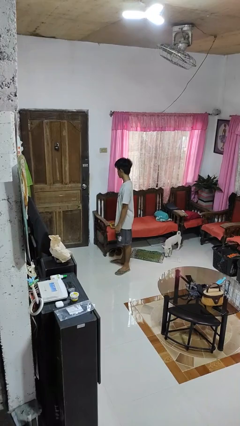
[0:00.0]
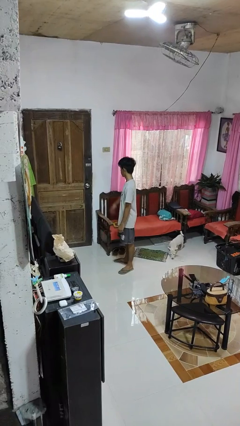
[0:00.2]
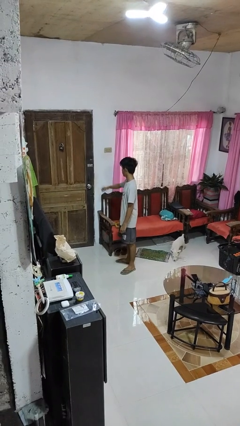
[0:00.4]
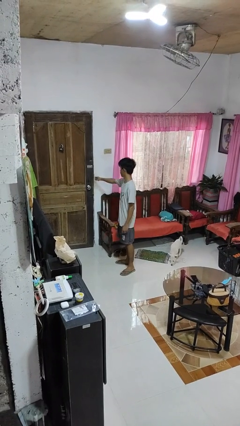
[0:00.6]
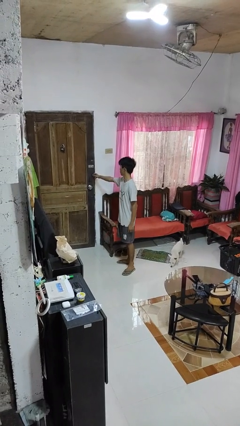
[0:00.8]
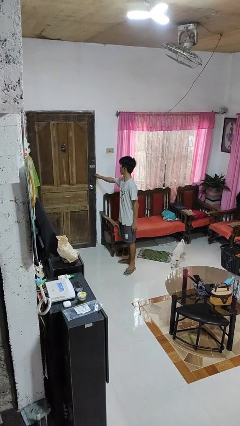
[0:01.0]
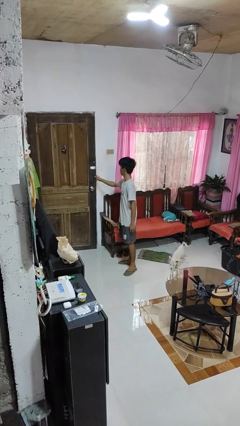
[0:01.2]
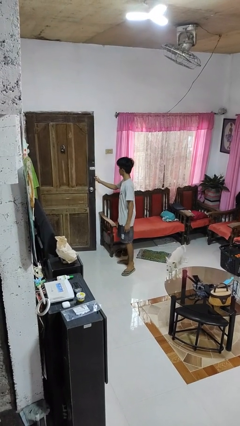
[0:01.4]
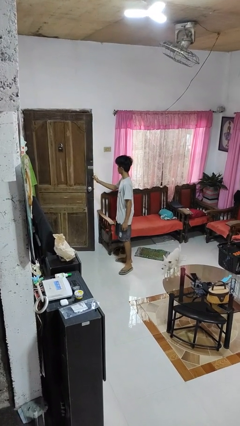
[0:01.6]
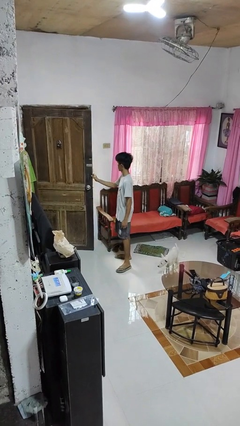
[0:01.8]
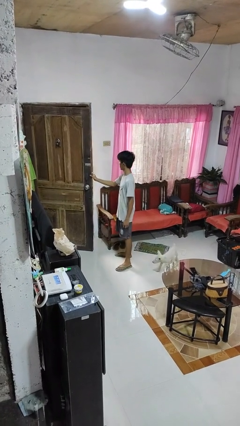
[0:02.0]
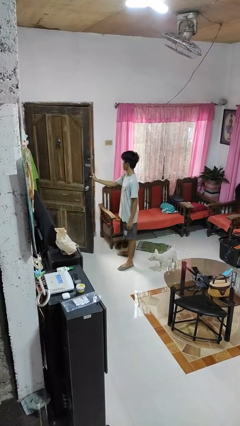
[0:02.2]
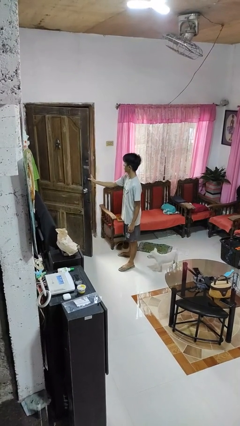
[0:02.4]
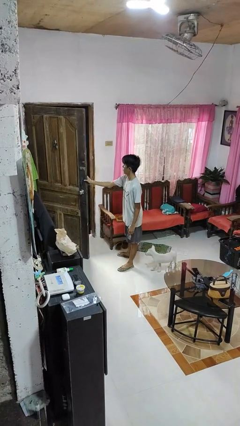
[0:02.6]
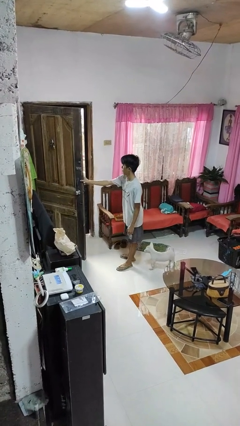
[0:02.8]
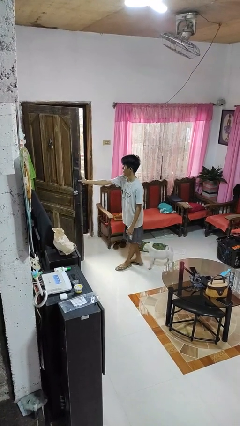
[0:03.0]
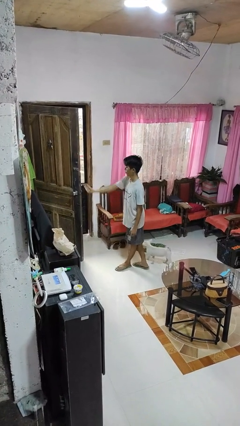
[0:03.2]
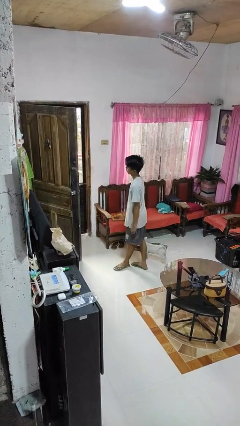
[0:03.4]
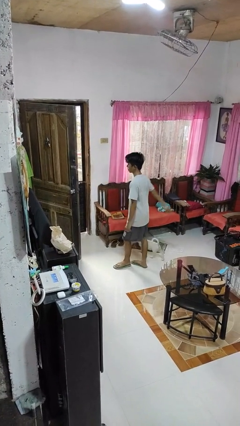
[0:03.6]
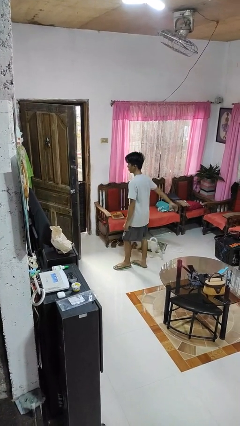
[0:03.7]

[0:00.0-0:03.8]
person opens facility door

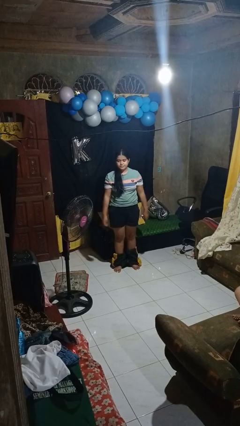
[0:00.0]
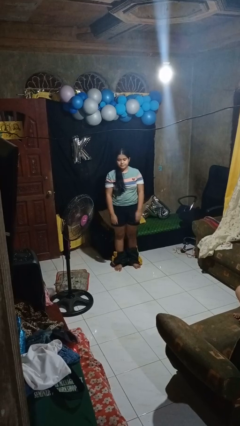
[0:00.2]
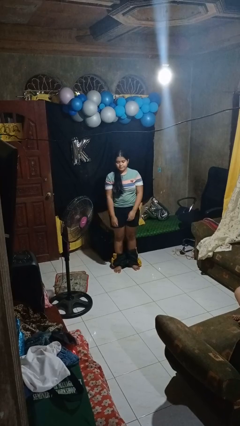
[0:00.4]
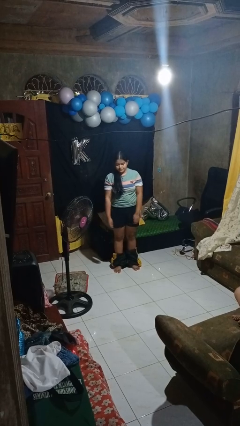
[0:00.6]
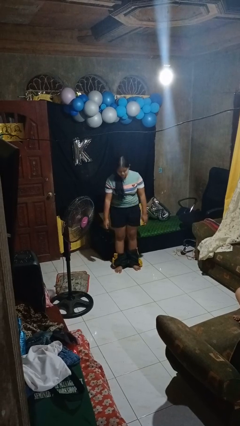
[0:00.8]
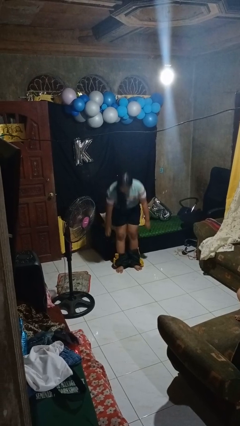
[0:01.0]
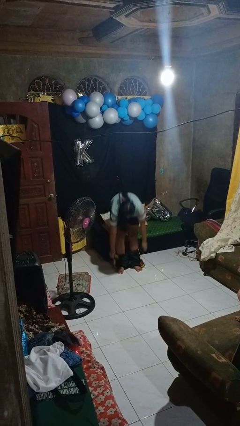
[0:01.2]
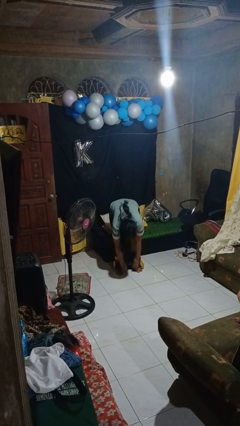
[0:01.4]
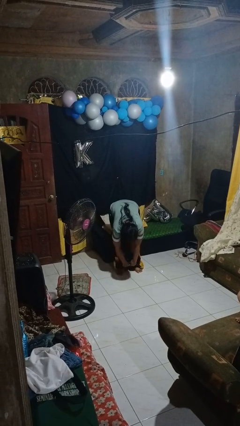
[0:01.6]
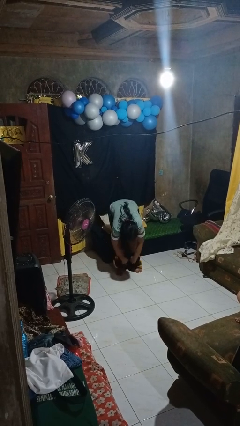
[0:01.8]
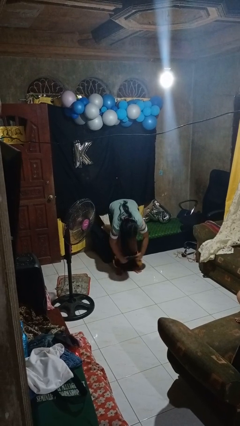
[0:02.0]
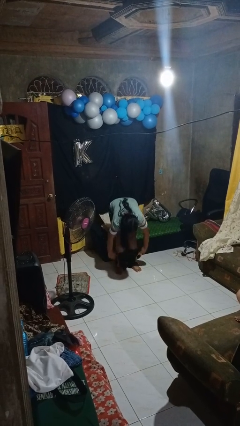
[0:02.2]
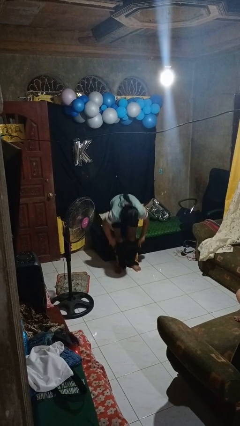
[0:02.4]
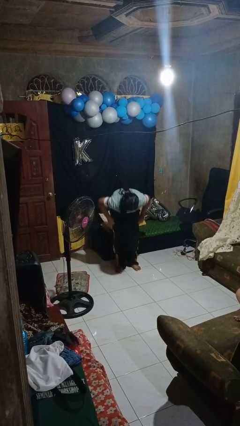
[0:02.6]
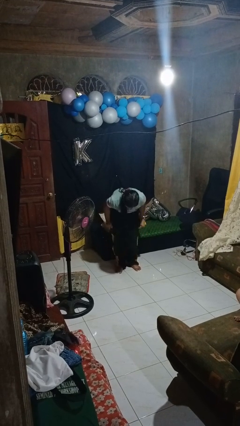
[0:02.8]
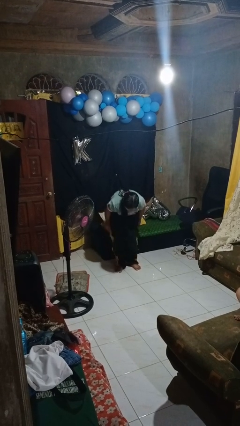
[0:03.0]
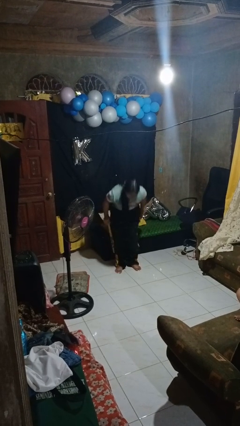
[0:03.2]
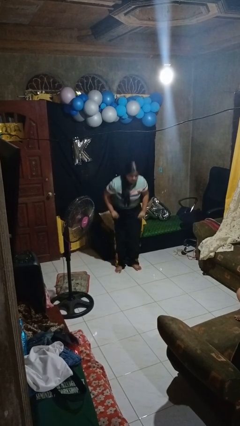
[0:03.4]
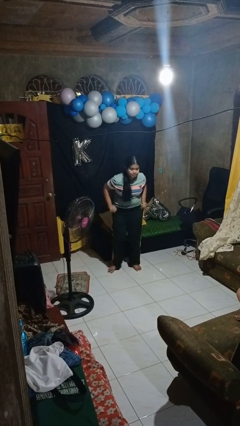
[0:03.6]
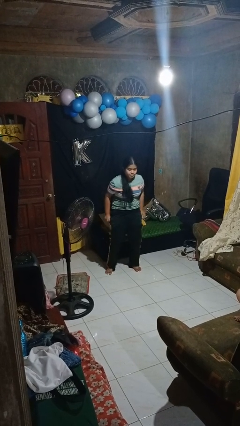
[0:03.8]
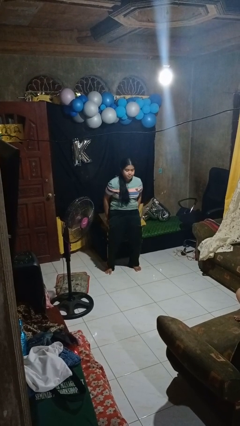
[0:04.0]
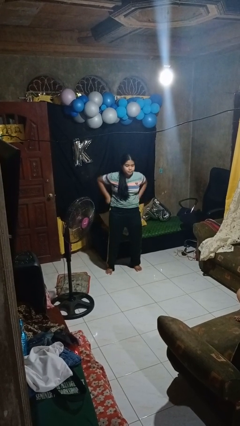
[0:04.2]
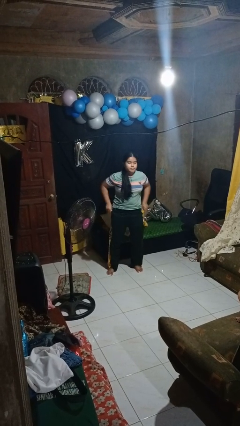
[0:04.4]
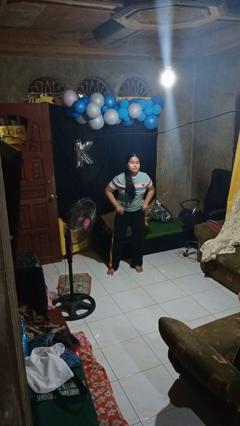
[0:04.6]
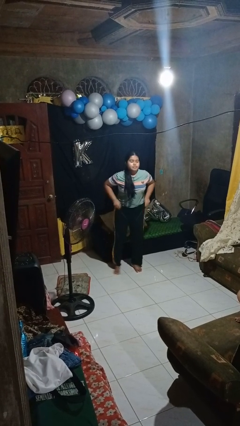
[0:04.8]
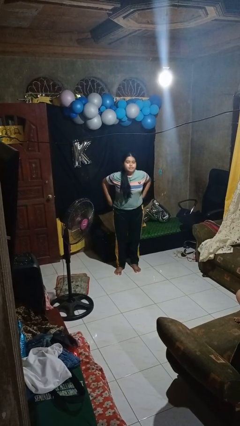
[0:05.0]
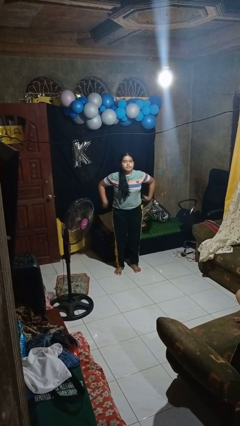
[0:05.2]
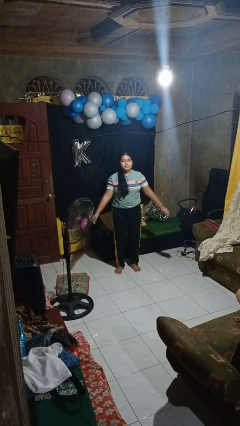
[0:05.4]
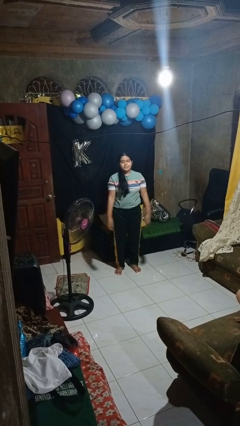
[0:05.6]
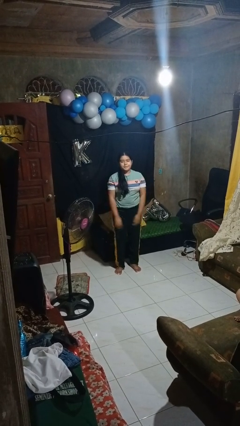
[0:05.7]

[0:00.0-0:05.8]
person puts on pants

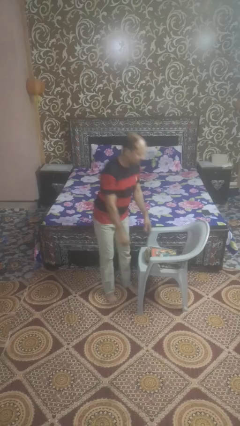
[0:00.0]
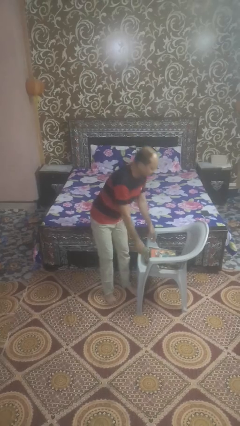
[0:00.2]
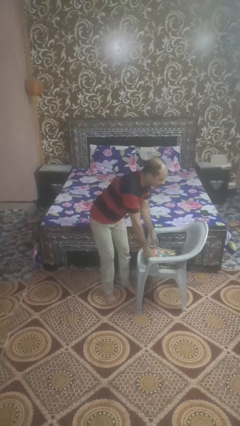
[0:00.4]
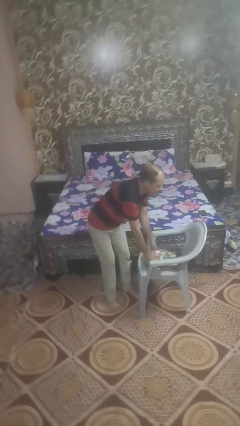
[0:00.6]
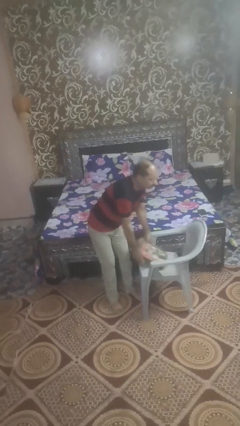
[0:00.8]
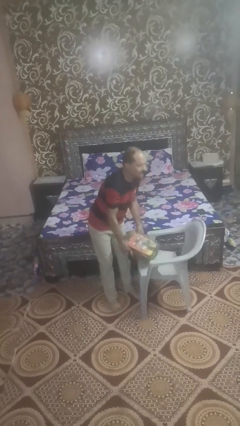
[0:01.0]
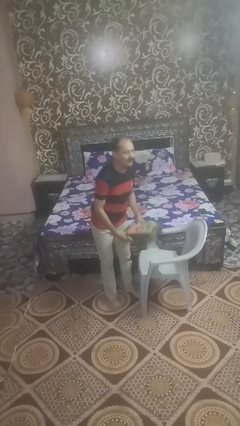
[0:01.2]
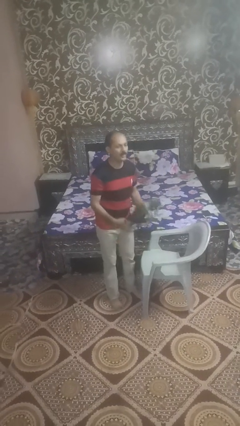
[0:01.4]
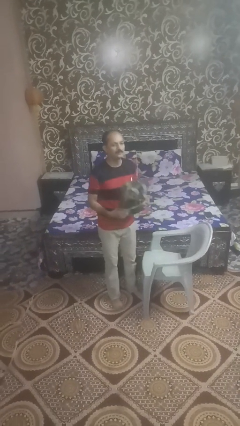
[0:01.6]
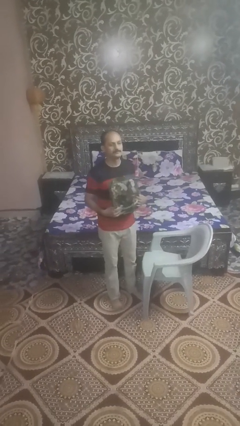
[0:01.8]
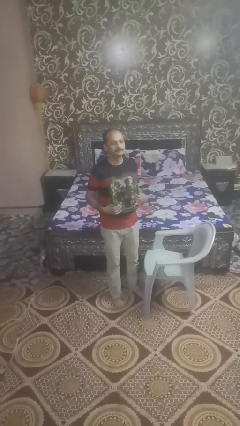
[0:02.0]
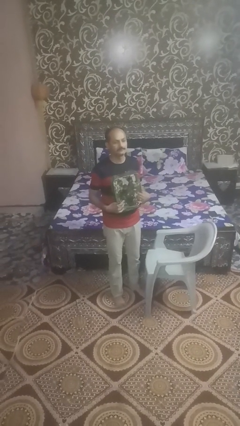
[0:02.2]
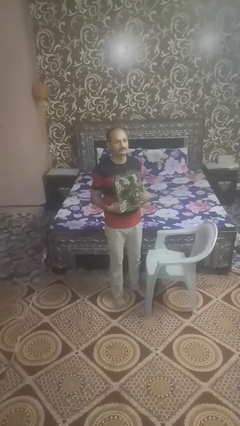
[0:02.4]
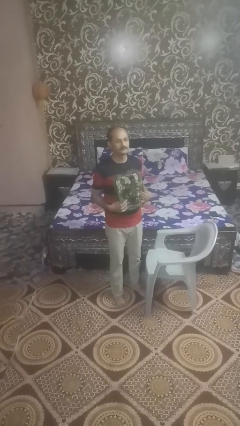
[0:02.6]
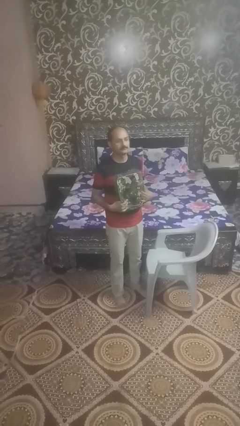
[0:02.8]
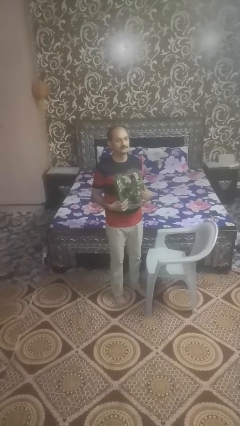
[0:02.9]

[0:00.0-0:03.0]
person picks up object from couch

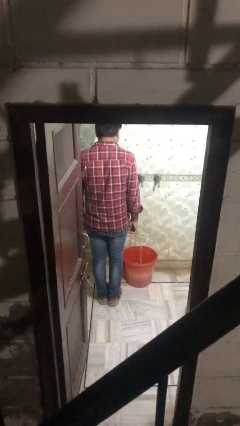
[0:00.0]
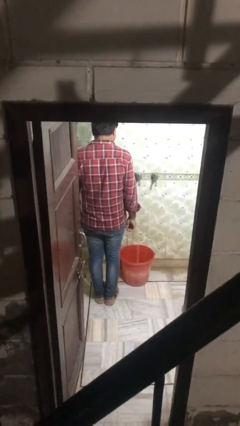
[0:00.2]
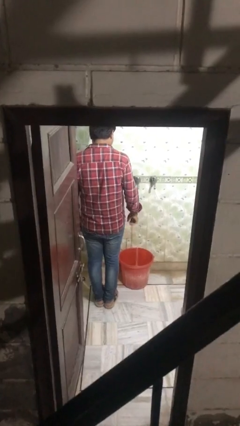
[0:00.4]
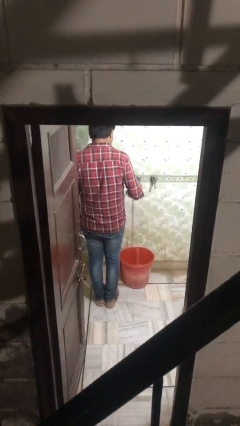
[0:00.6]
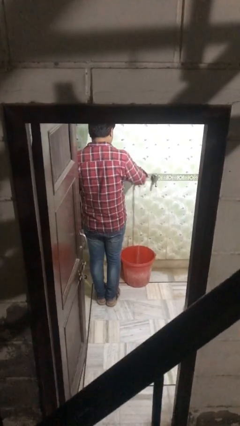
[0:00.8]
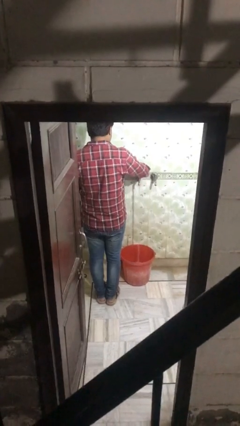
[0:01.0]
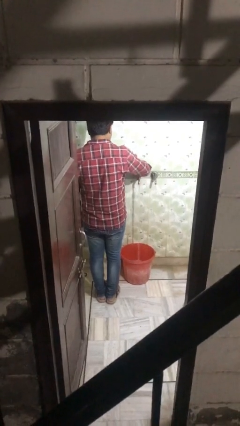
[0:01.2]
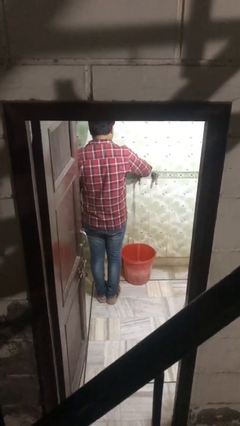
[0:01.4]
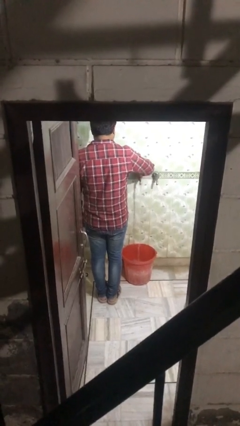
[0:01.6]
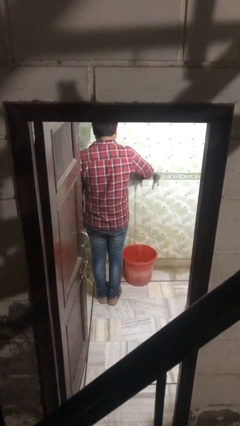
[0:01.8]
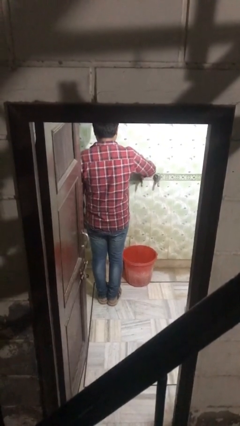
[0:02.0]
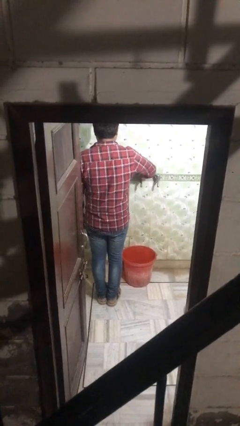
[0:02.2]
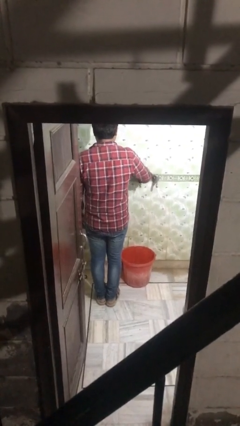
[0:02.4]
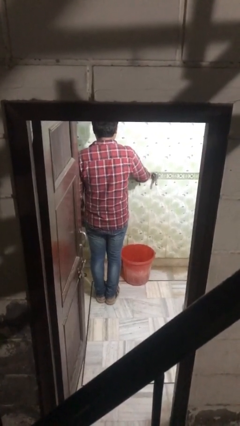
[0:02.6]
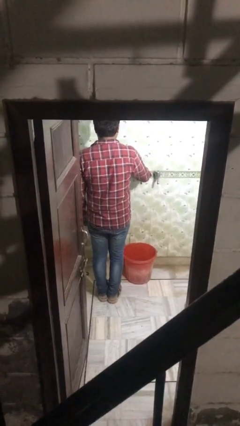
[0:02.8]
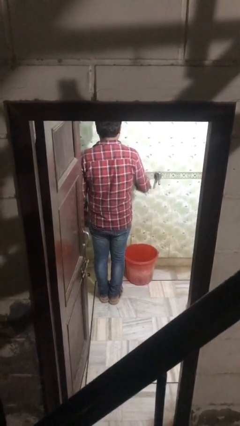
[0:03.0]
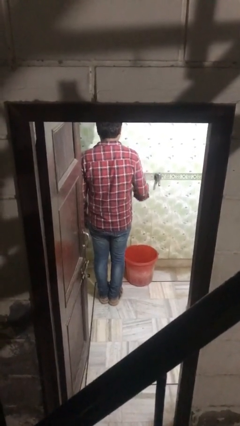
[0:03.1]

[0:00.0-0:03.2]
person turns off faucet

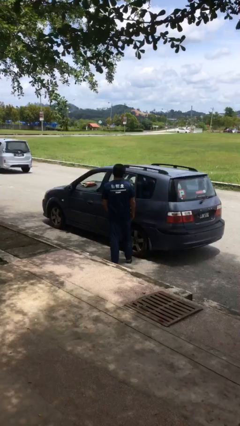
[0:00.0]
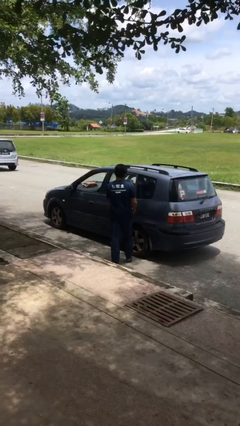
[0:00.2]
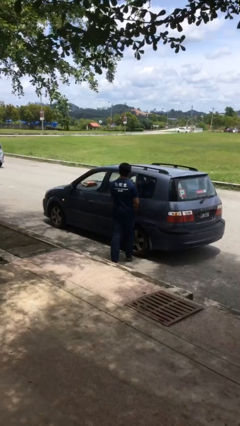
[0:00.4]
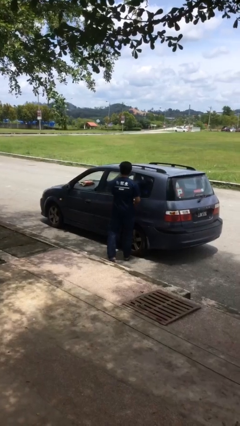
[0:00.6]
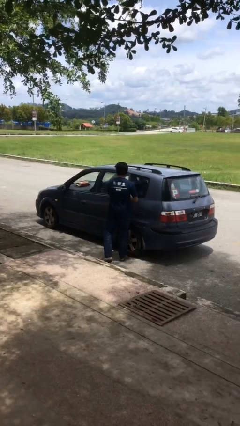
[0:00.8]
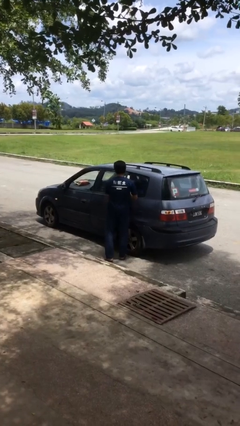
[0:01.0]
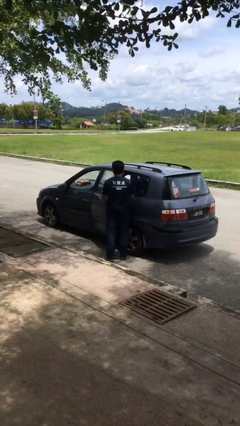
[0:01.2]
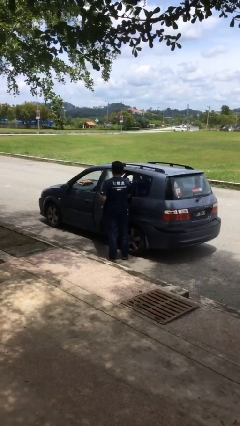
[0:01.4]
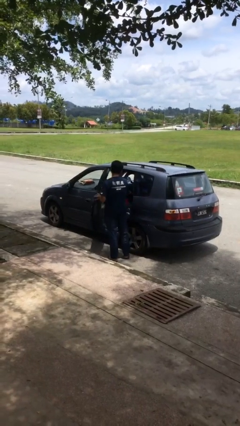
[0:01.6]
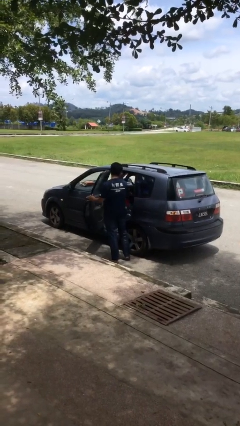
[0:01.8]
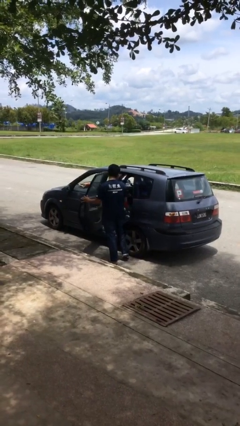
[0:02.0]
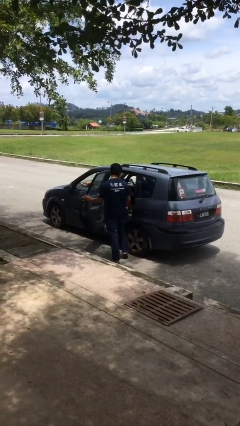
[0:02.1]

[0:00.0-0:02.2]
person opens car door
